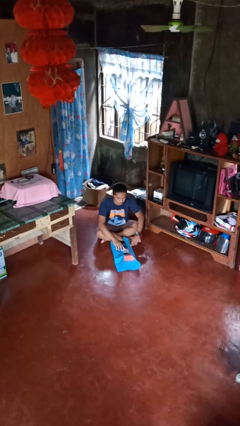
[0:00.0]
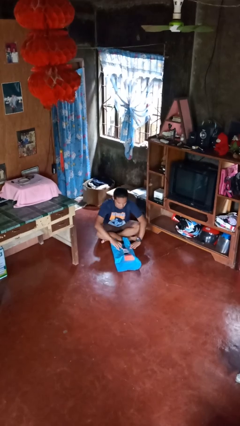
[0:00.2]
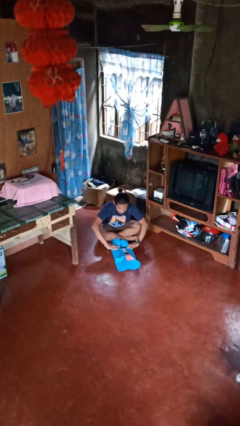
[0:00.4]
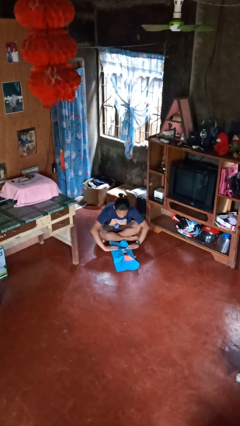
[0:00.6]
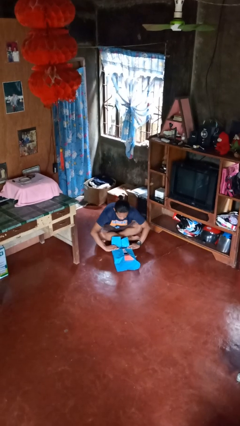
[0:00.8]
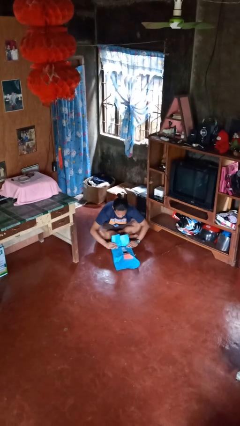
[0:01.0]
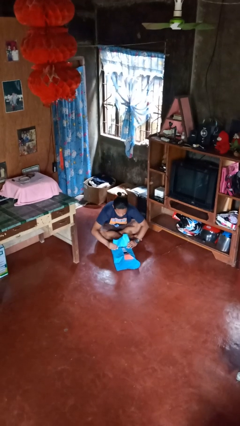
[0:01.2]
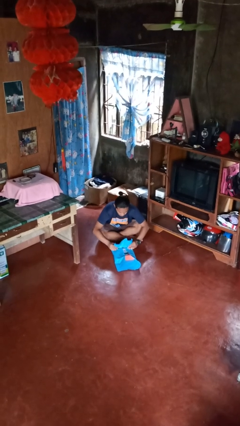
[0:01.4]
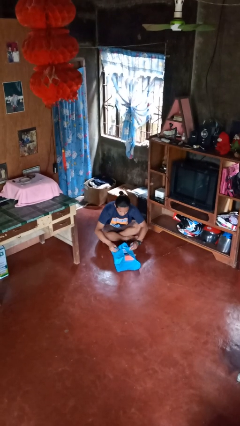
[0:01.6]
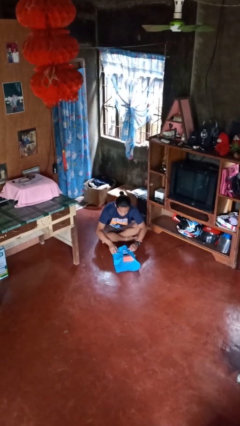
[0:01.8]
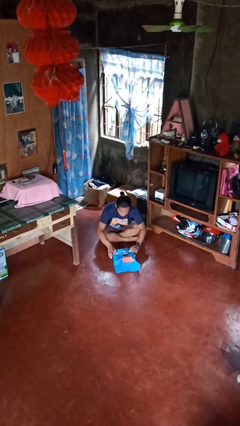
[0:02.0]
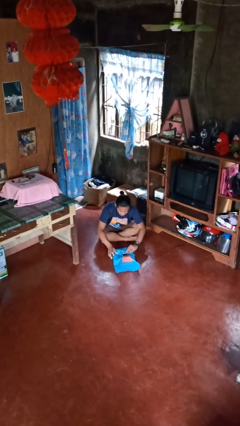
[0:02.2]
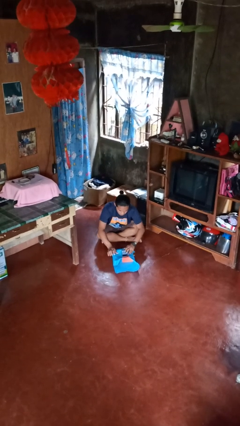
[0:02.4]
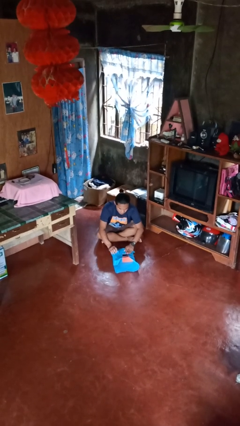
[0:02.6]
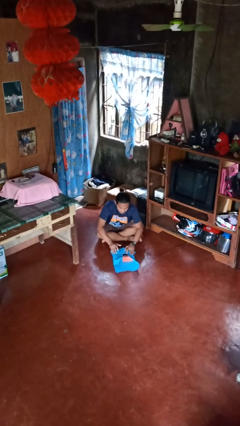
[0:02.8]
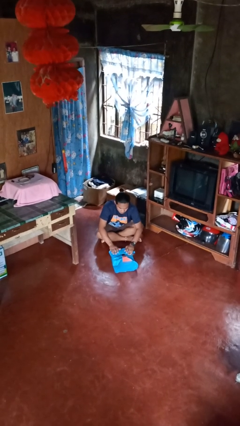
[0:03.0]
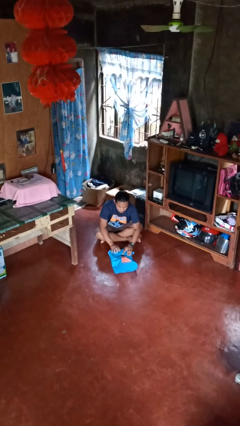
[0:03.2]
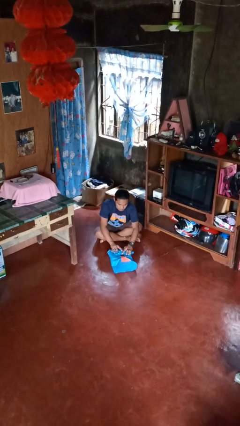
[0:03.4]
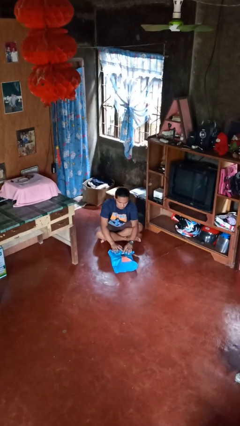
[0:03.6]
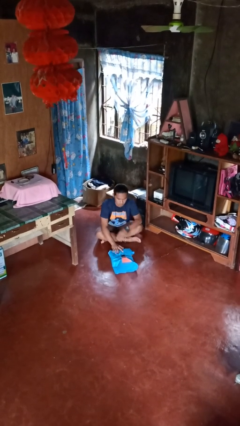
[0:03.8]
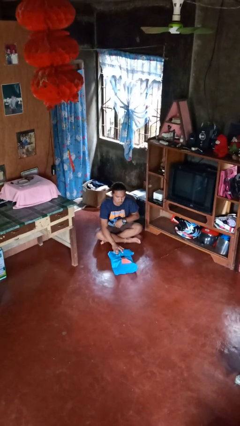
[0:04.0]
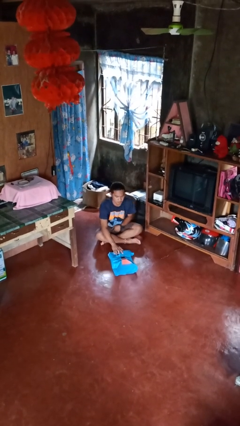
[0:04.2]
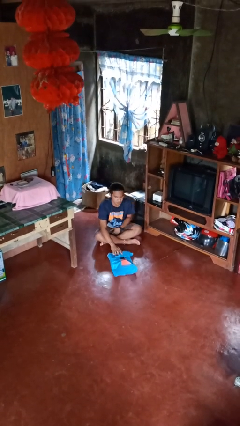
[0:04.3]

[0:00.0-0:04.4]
person wraps box

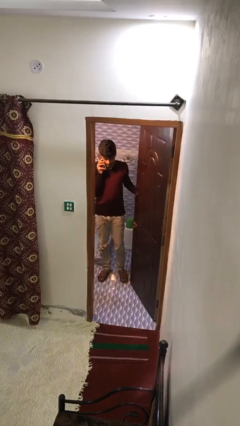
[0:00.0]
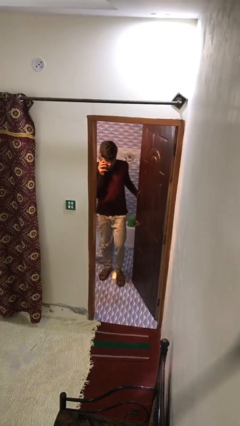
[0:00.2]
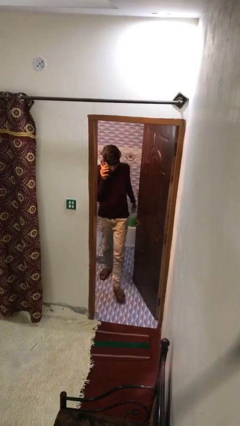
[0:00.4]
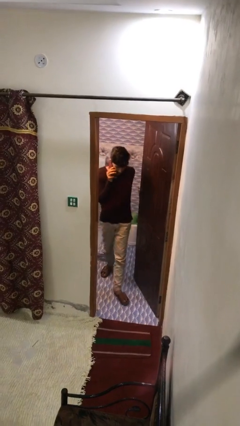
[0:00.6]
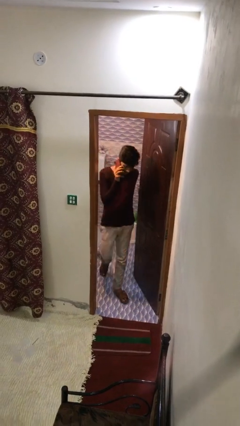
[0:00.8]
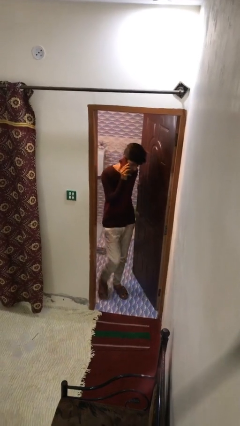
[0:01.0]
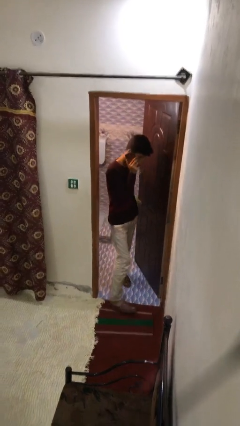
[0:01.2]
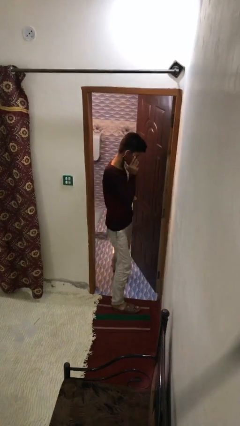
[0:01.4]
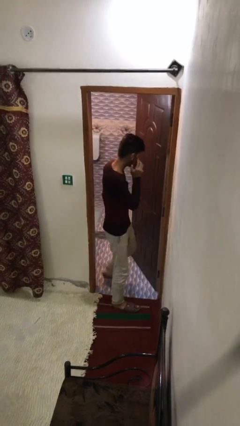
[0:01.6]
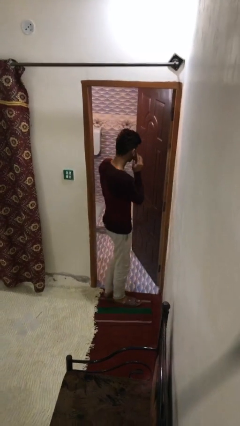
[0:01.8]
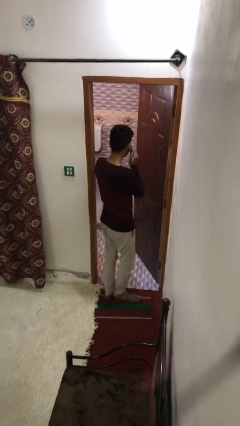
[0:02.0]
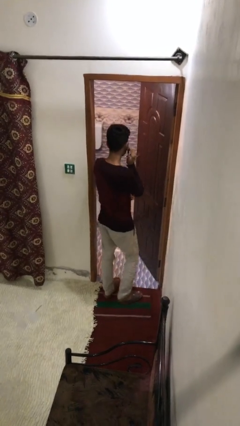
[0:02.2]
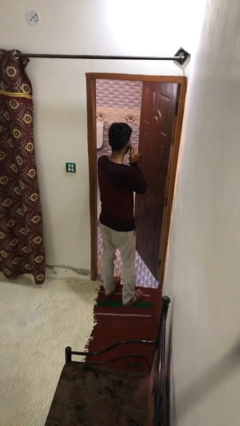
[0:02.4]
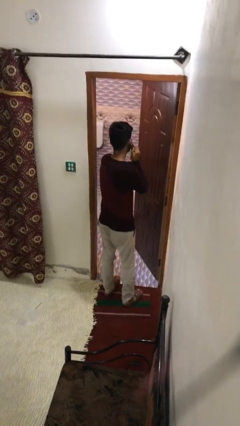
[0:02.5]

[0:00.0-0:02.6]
person enters scene through structure

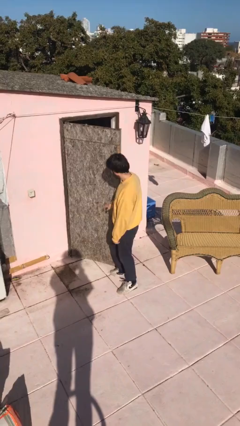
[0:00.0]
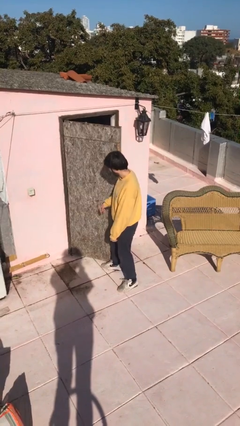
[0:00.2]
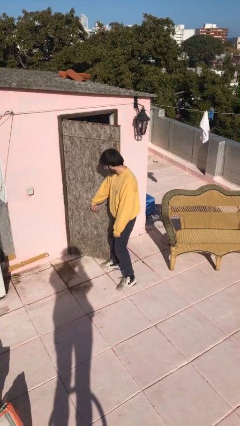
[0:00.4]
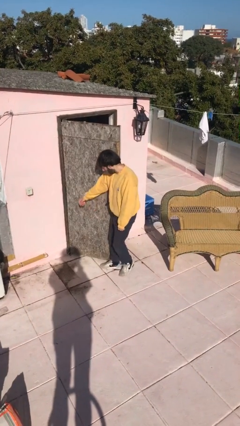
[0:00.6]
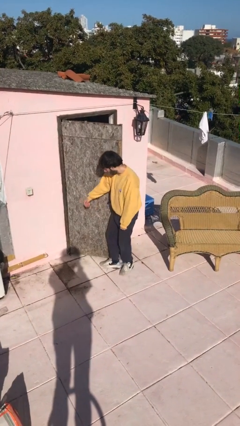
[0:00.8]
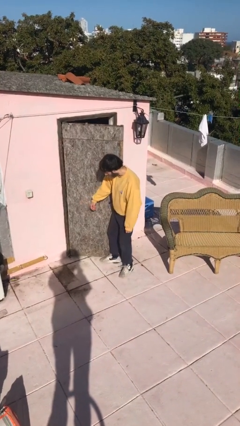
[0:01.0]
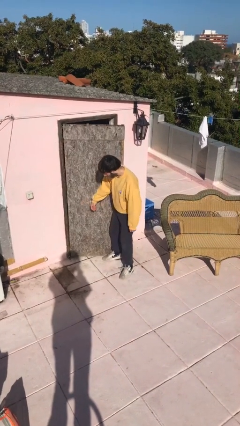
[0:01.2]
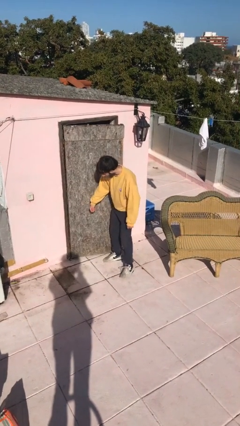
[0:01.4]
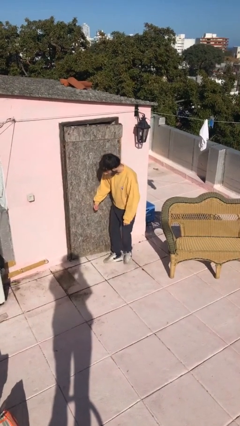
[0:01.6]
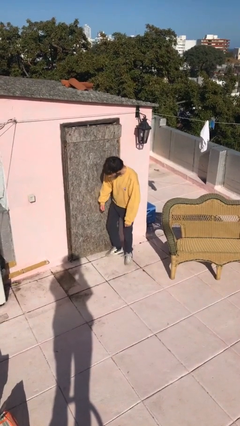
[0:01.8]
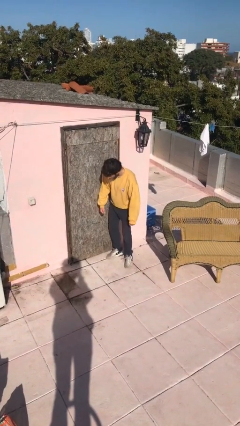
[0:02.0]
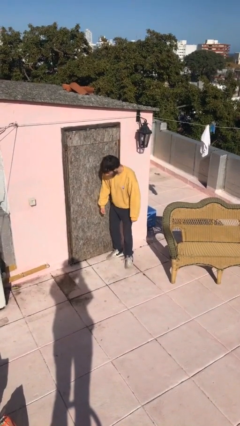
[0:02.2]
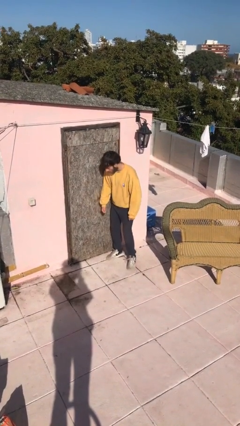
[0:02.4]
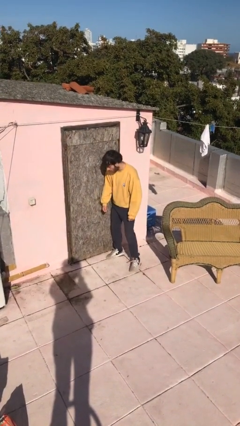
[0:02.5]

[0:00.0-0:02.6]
person closes door with hip

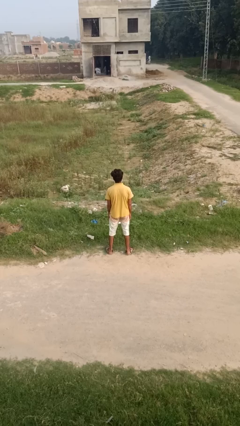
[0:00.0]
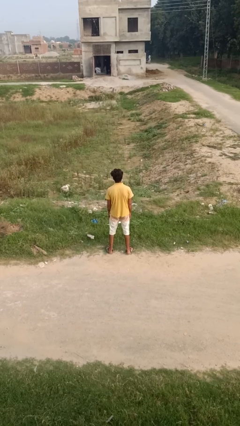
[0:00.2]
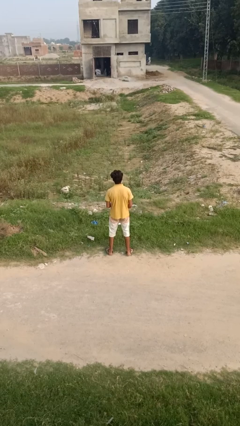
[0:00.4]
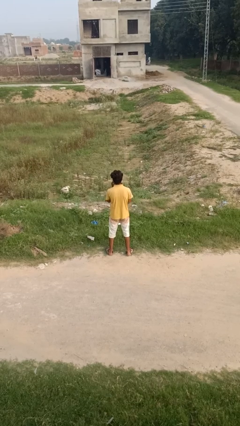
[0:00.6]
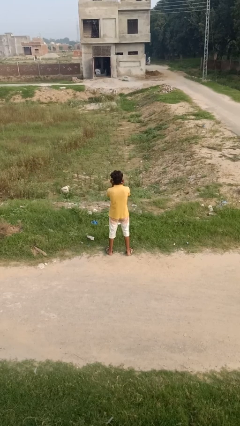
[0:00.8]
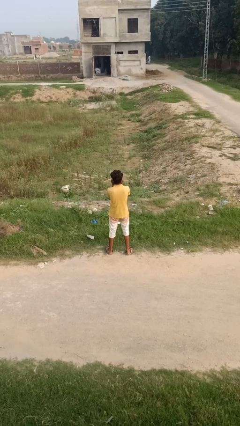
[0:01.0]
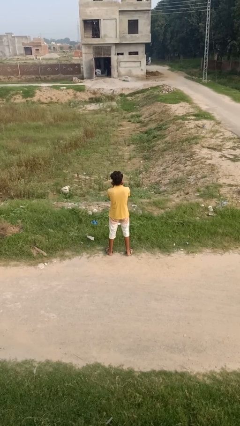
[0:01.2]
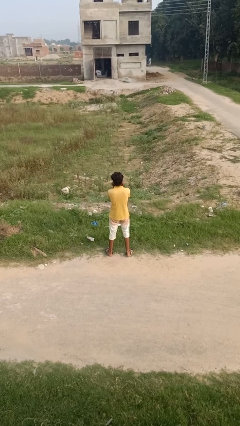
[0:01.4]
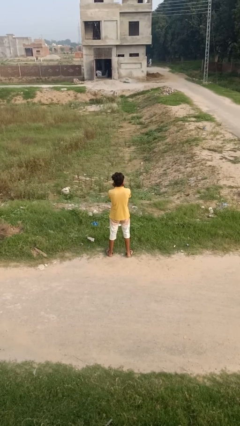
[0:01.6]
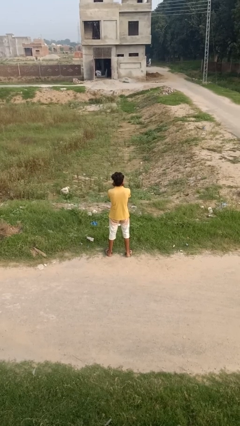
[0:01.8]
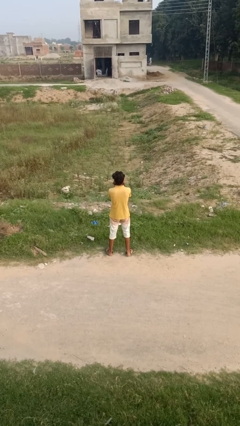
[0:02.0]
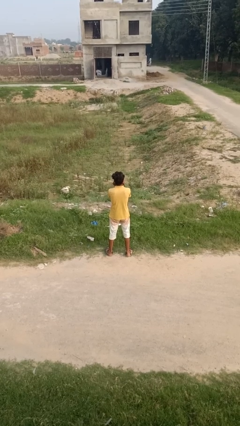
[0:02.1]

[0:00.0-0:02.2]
person touches earlobe

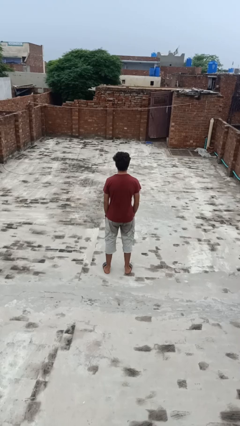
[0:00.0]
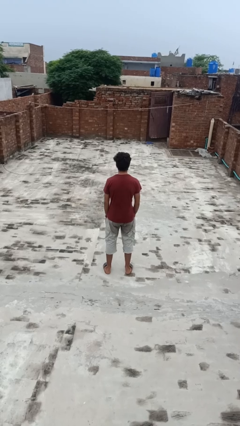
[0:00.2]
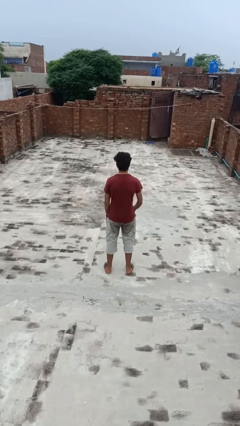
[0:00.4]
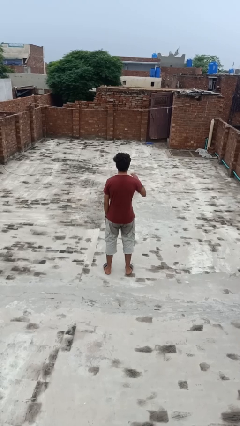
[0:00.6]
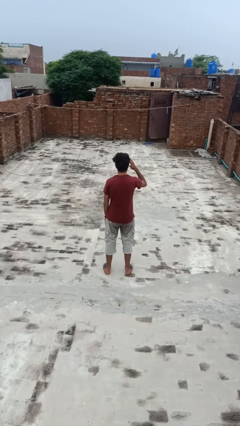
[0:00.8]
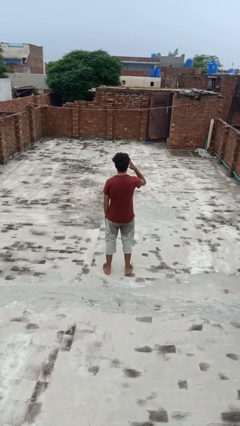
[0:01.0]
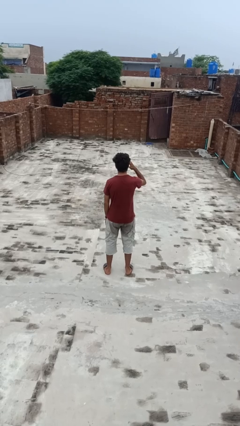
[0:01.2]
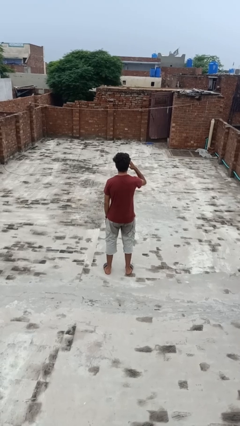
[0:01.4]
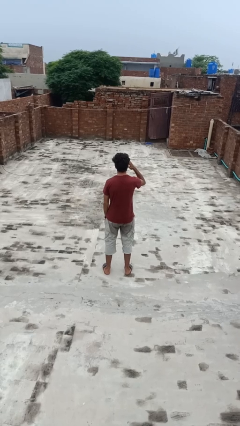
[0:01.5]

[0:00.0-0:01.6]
person salutes

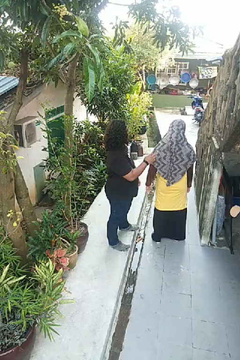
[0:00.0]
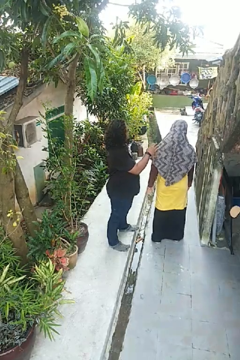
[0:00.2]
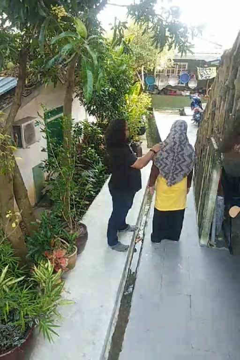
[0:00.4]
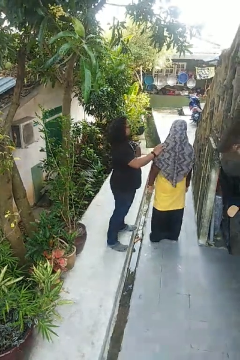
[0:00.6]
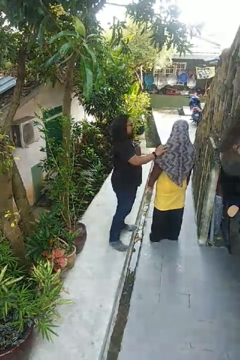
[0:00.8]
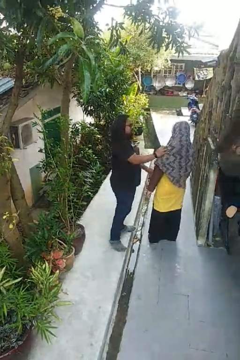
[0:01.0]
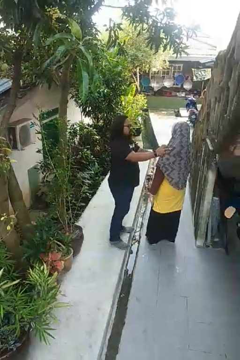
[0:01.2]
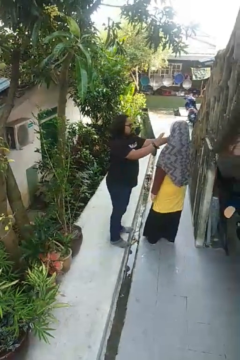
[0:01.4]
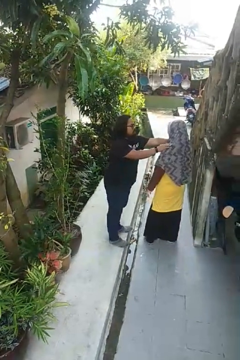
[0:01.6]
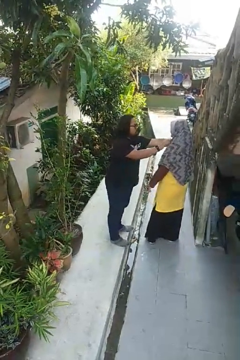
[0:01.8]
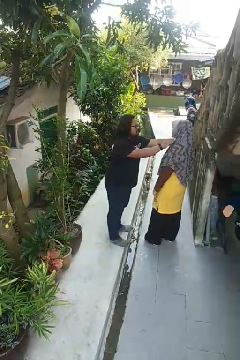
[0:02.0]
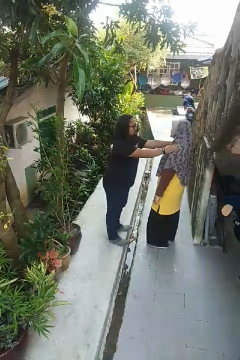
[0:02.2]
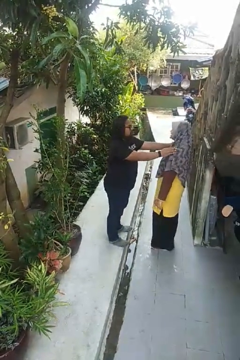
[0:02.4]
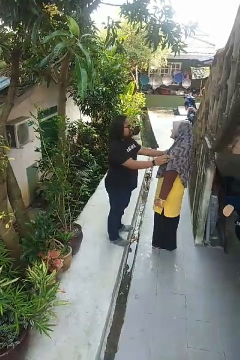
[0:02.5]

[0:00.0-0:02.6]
person pounds shoulders of person

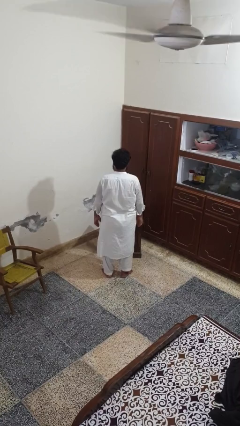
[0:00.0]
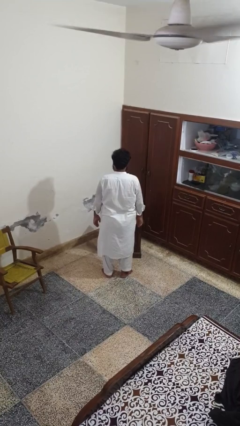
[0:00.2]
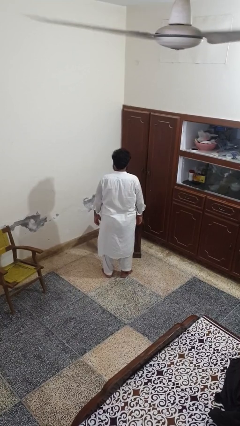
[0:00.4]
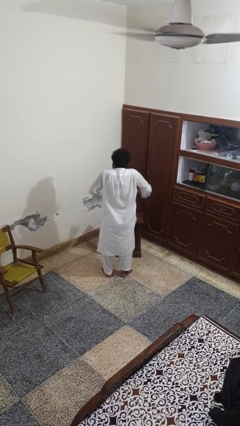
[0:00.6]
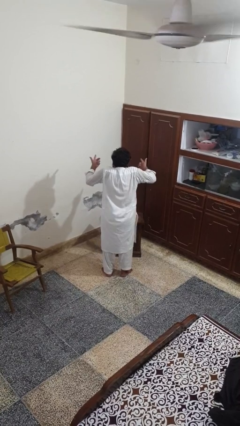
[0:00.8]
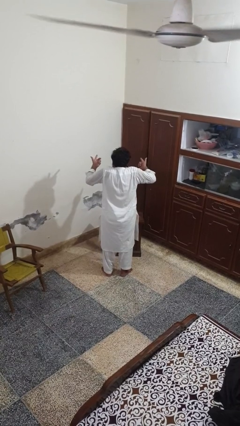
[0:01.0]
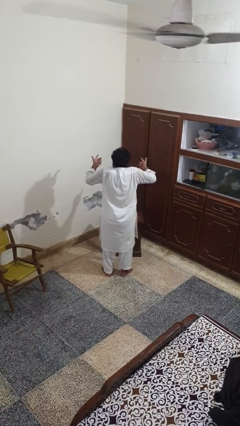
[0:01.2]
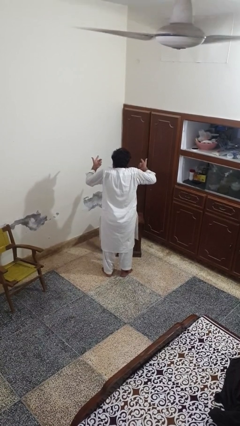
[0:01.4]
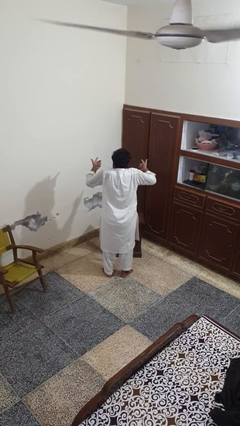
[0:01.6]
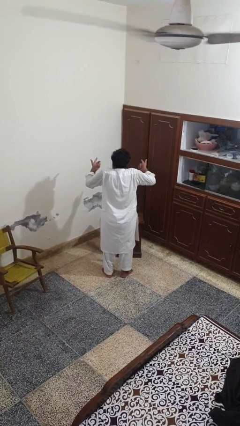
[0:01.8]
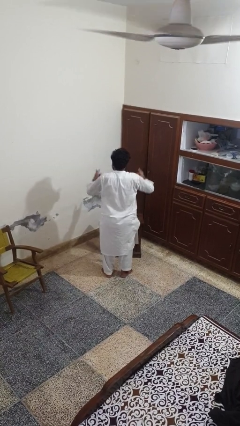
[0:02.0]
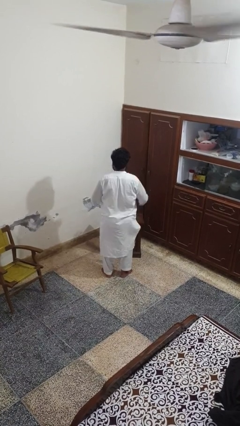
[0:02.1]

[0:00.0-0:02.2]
person shrugs
